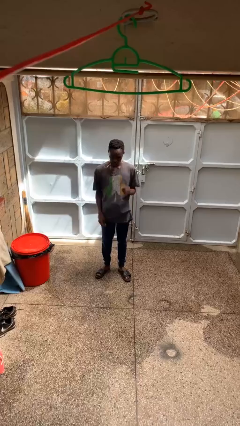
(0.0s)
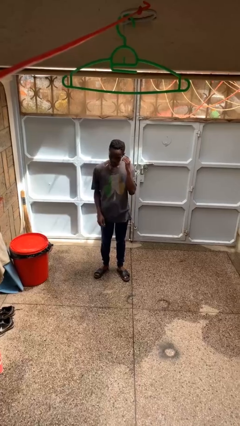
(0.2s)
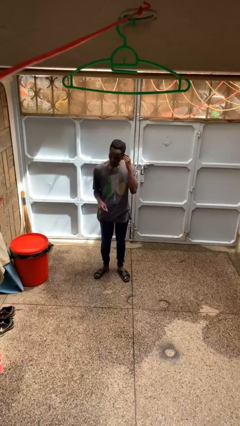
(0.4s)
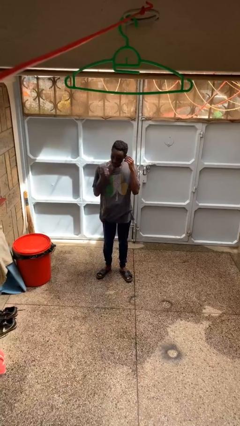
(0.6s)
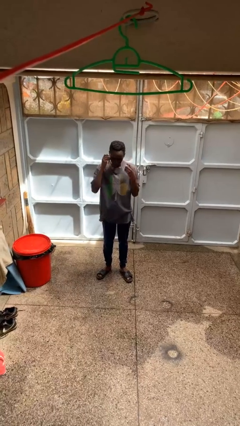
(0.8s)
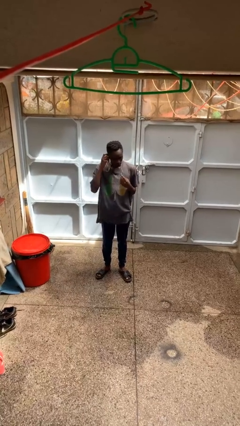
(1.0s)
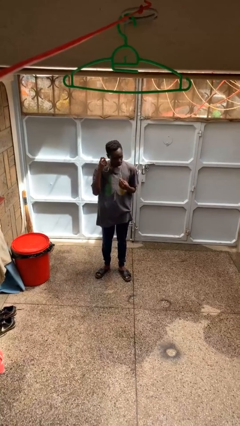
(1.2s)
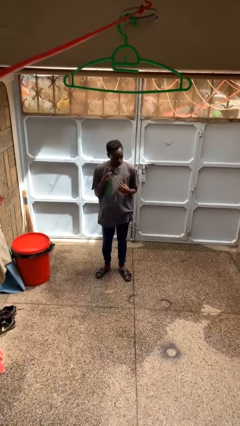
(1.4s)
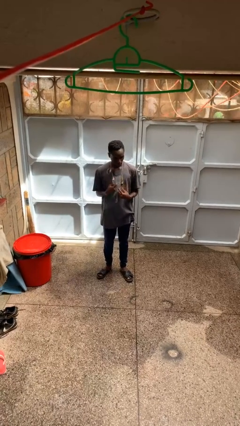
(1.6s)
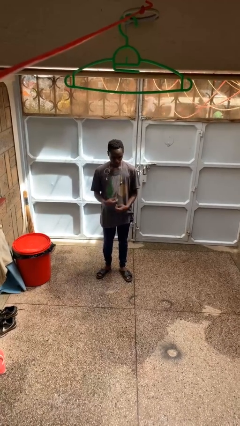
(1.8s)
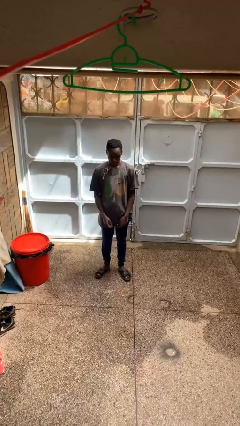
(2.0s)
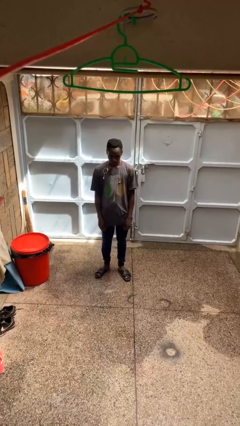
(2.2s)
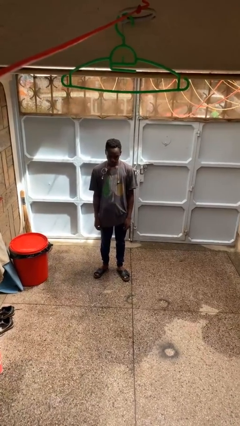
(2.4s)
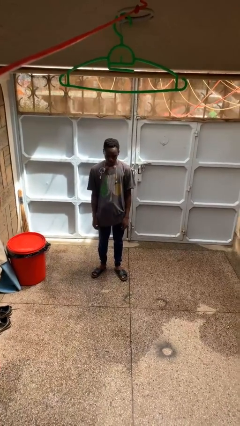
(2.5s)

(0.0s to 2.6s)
person takes off headphones

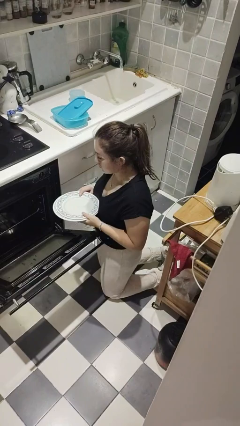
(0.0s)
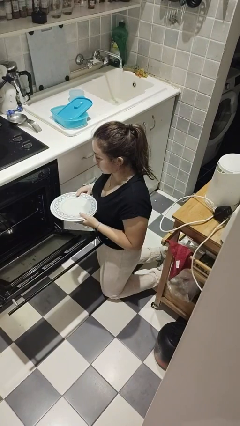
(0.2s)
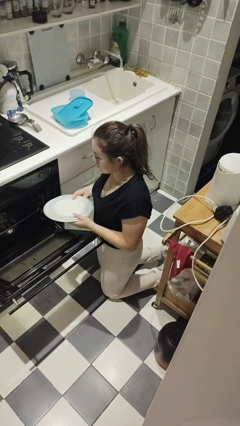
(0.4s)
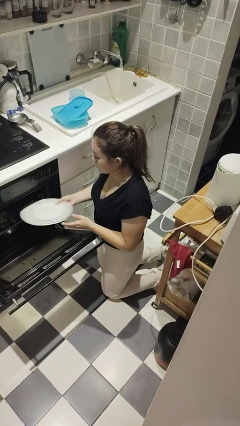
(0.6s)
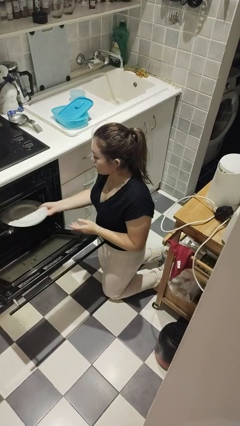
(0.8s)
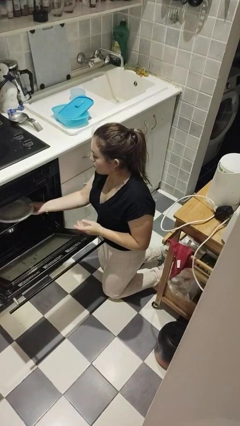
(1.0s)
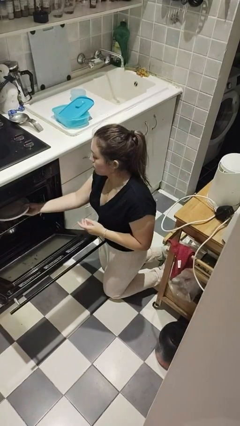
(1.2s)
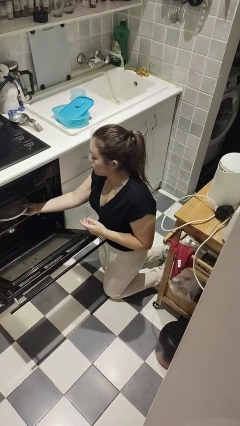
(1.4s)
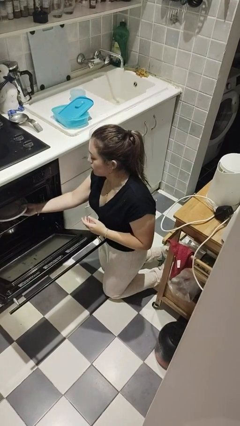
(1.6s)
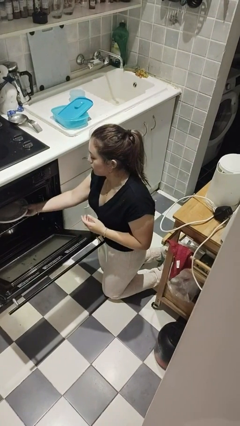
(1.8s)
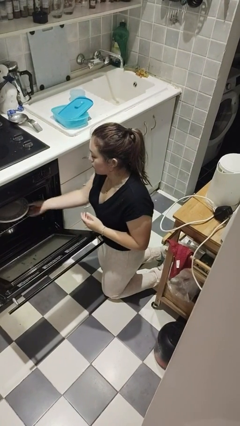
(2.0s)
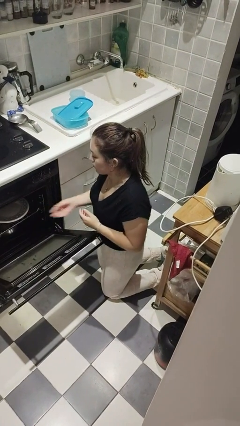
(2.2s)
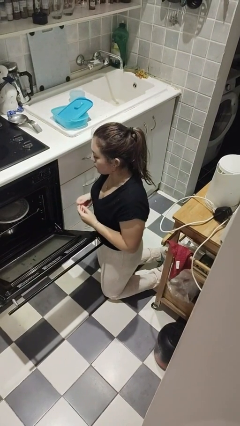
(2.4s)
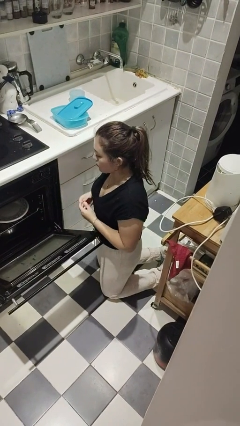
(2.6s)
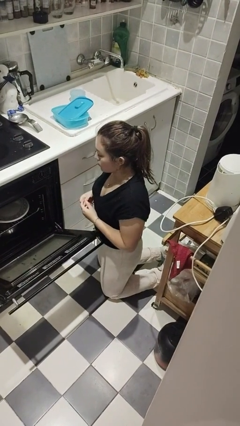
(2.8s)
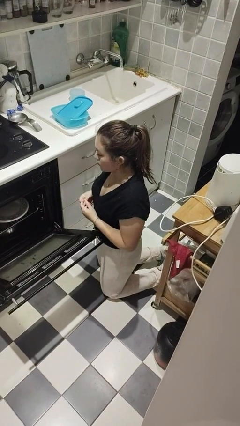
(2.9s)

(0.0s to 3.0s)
person loads dishwasher

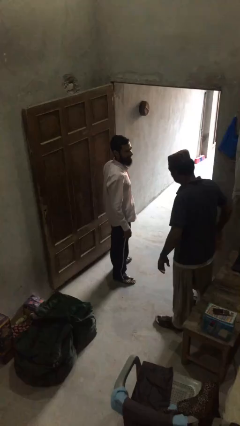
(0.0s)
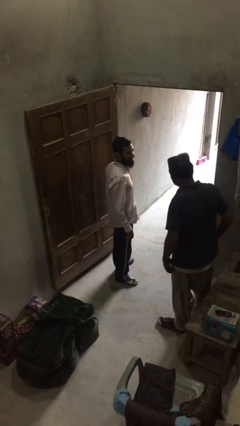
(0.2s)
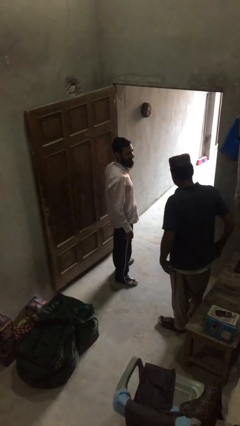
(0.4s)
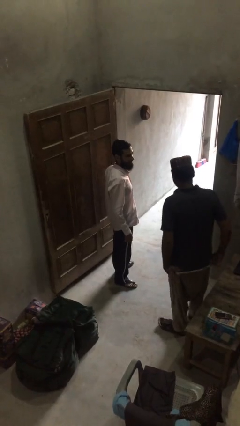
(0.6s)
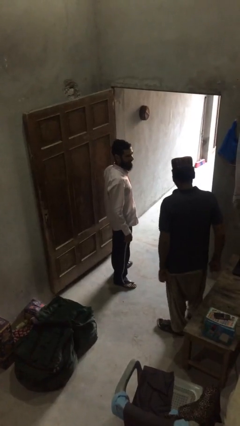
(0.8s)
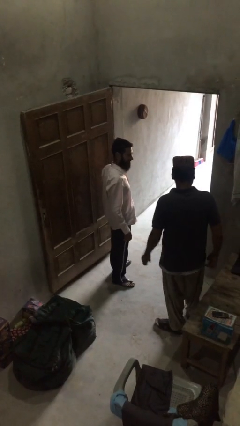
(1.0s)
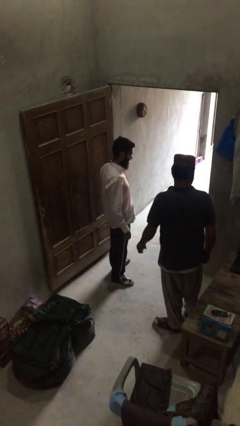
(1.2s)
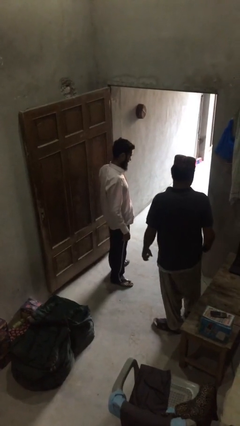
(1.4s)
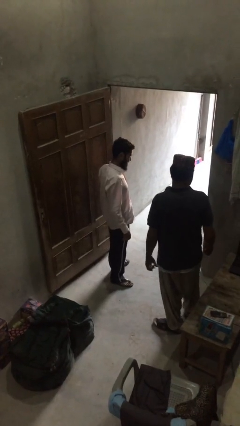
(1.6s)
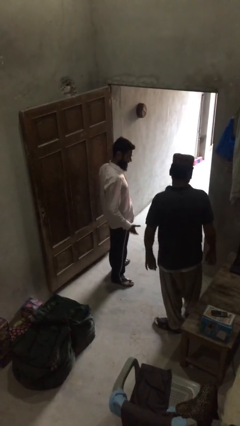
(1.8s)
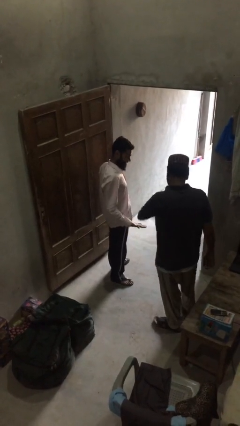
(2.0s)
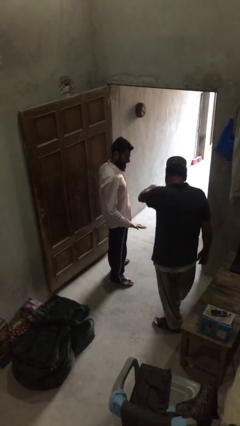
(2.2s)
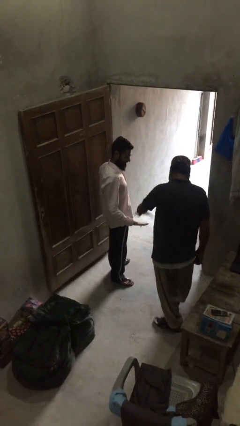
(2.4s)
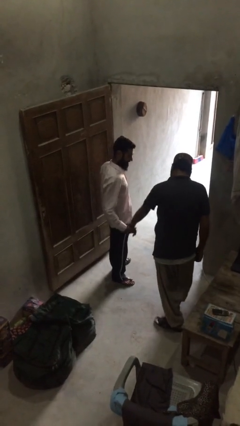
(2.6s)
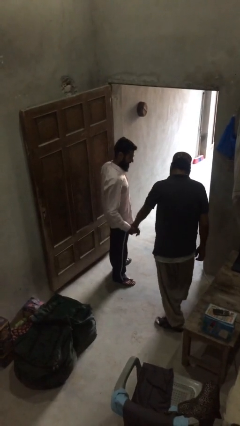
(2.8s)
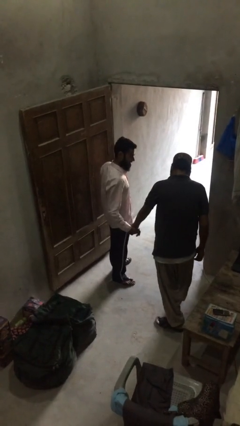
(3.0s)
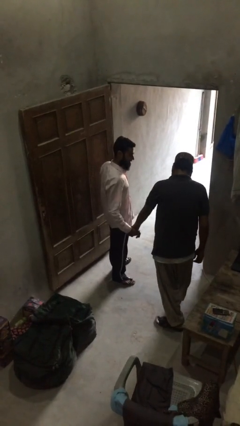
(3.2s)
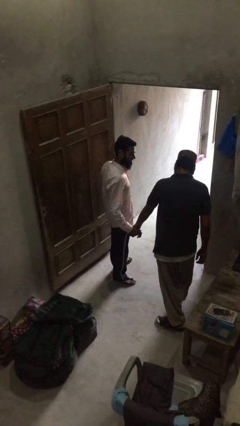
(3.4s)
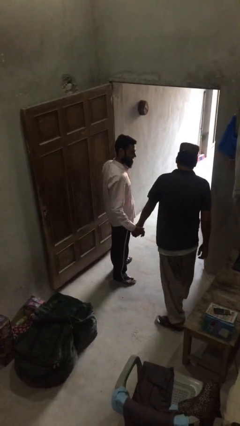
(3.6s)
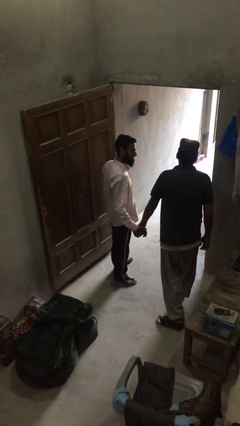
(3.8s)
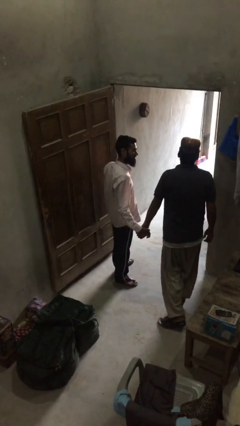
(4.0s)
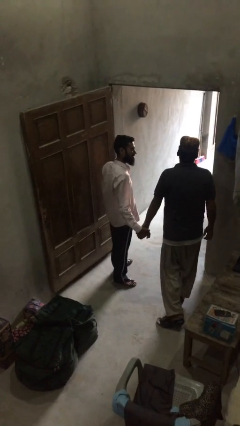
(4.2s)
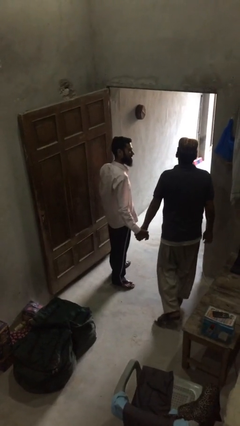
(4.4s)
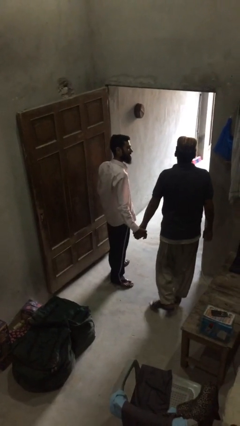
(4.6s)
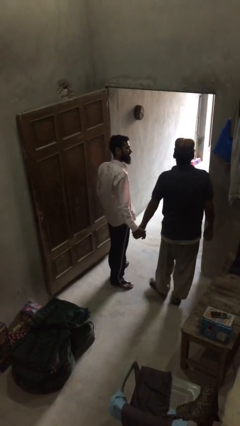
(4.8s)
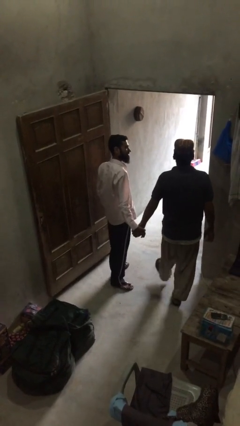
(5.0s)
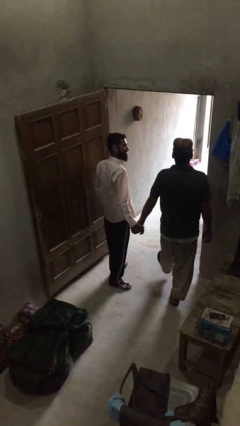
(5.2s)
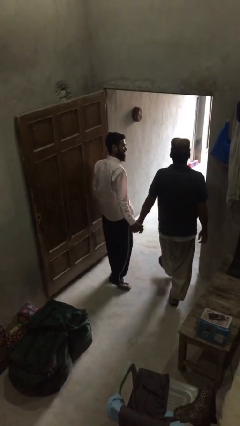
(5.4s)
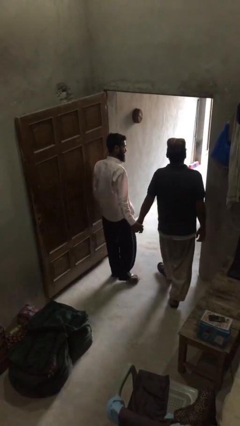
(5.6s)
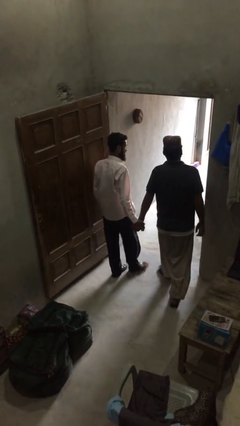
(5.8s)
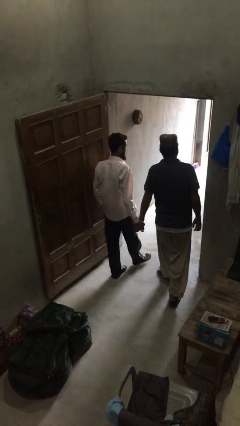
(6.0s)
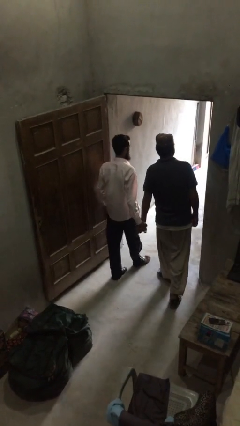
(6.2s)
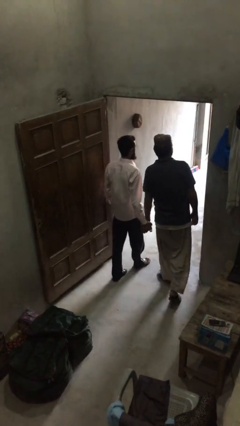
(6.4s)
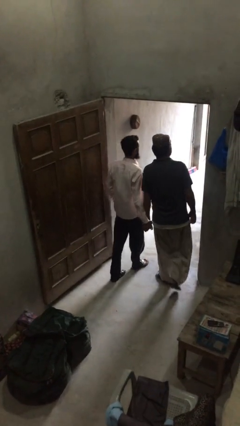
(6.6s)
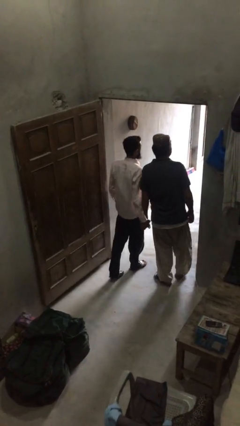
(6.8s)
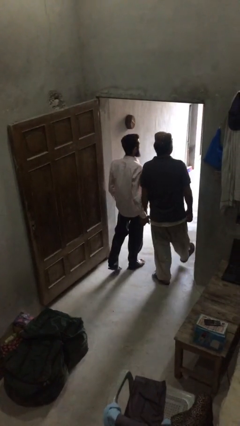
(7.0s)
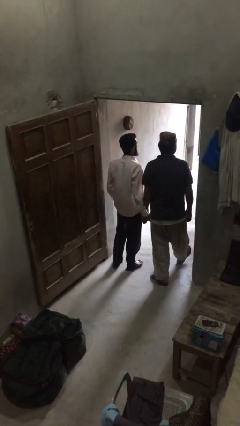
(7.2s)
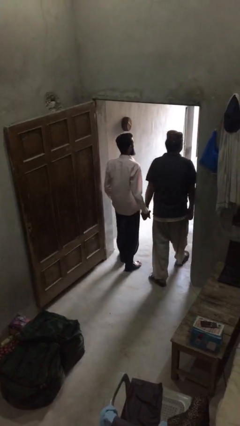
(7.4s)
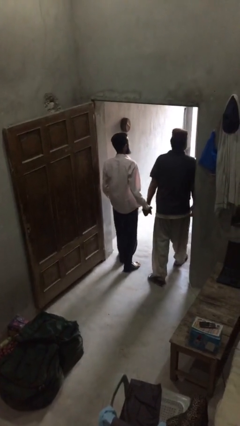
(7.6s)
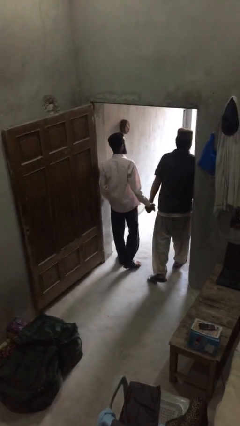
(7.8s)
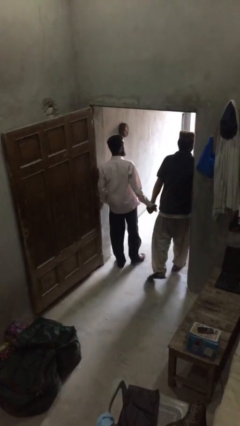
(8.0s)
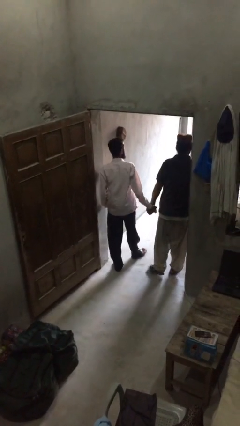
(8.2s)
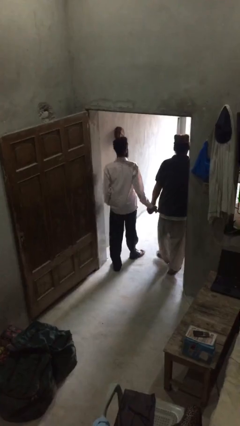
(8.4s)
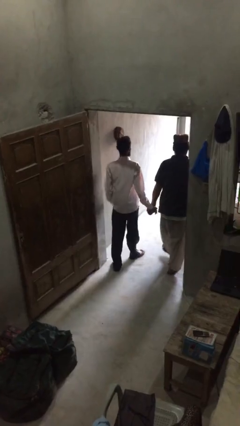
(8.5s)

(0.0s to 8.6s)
person holds hand

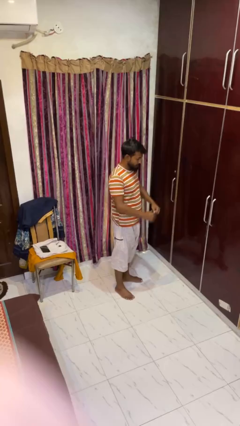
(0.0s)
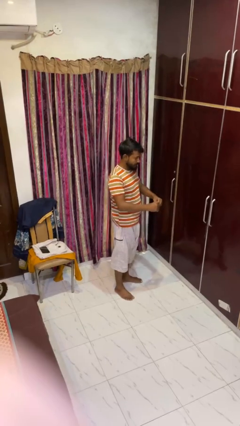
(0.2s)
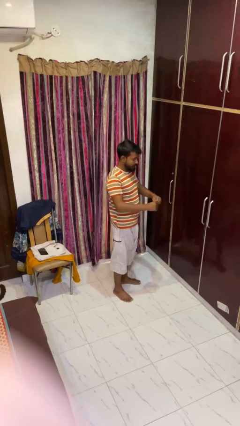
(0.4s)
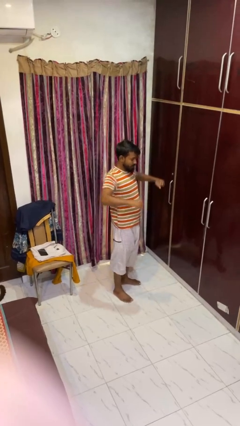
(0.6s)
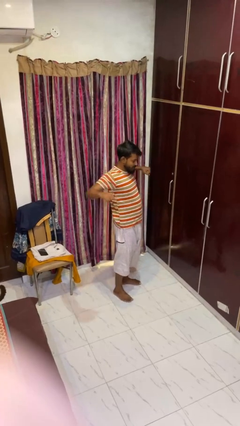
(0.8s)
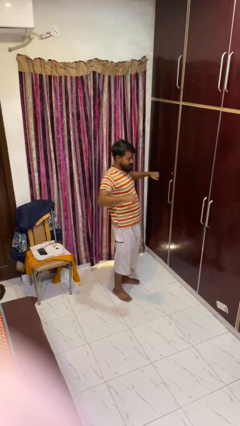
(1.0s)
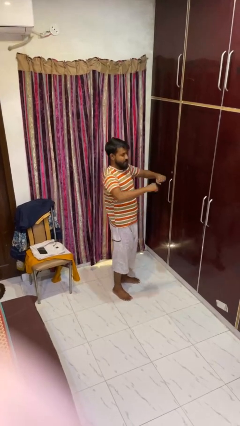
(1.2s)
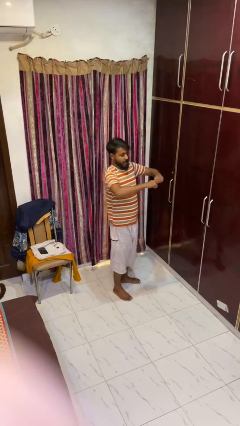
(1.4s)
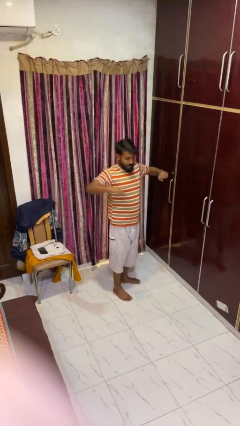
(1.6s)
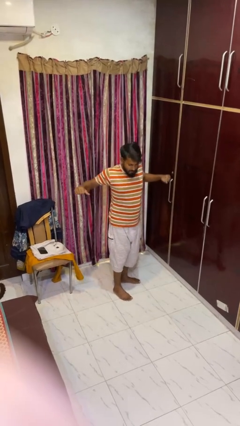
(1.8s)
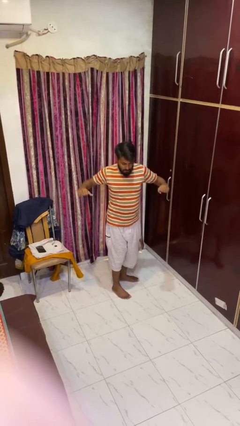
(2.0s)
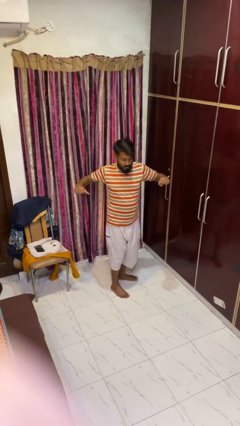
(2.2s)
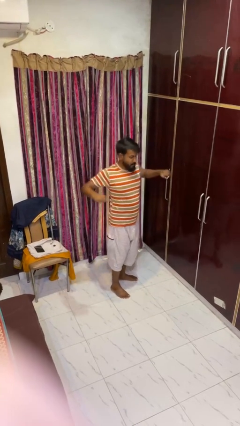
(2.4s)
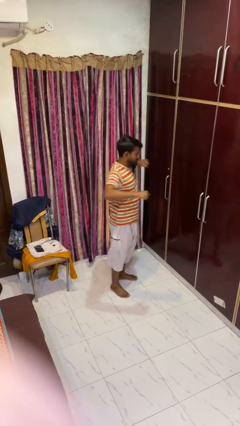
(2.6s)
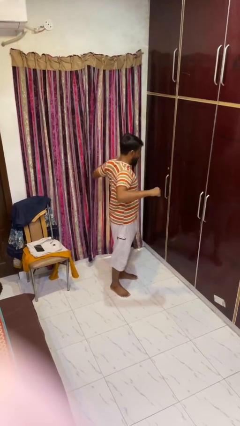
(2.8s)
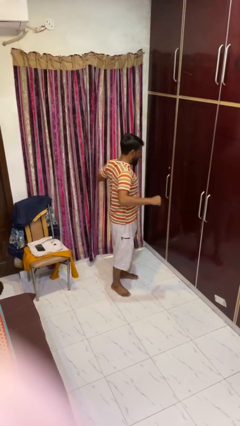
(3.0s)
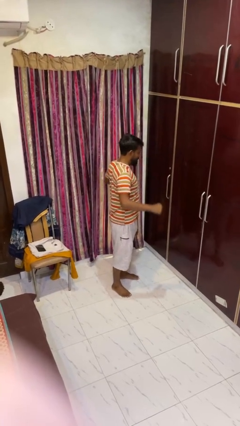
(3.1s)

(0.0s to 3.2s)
person stretches arms to side

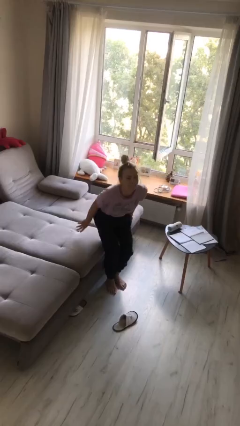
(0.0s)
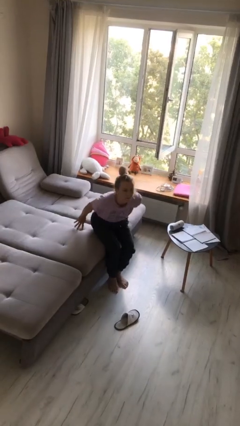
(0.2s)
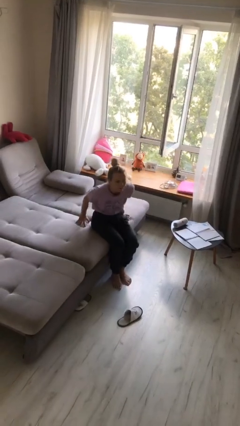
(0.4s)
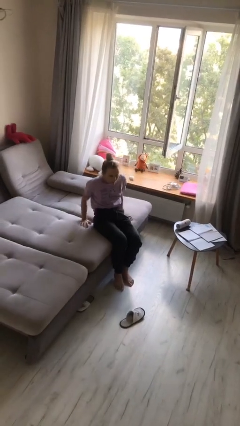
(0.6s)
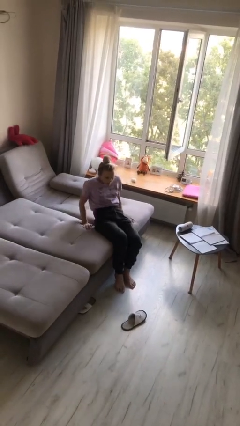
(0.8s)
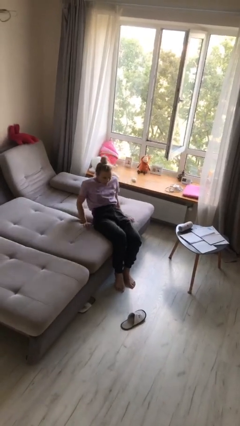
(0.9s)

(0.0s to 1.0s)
person lies down on bed
